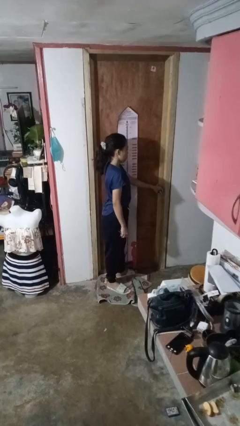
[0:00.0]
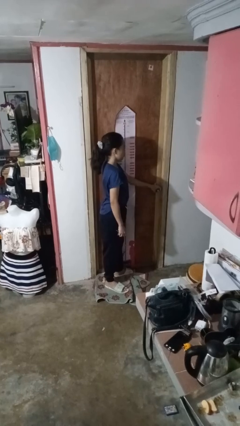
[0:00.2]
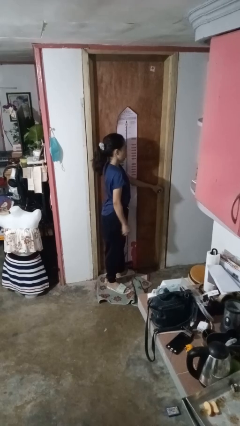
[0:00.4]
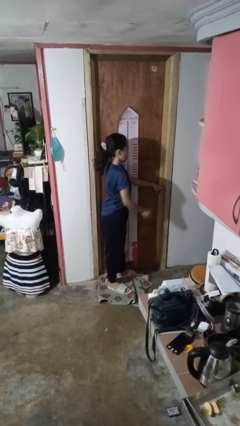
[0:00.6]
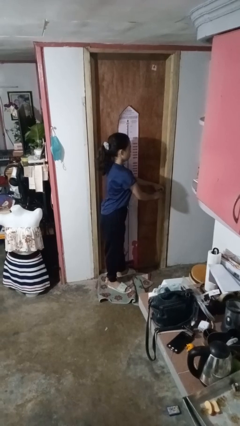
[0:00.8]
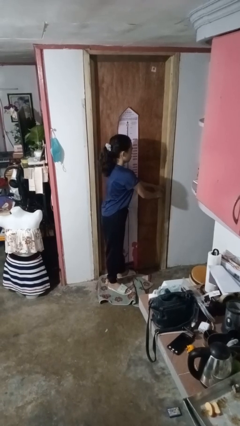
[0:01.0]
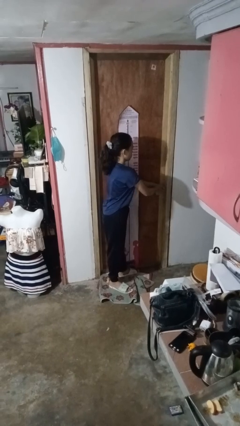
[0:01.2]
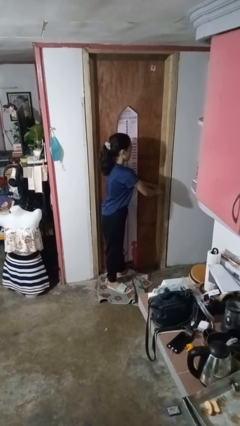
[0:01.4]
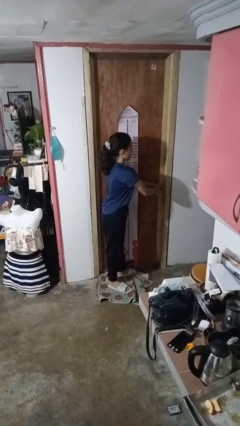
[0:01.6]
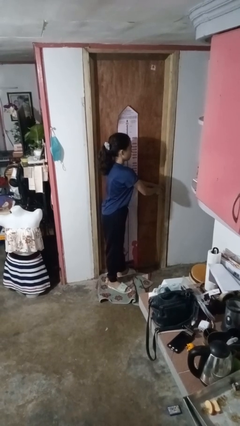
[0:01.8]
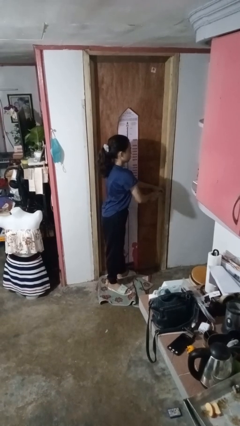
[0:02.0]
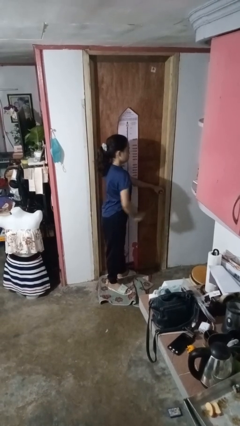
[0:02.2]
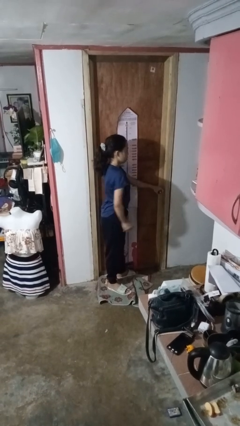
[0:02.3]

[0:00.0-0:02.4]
person locks door with keys

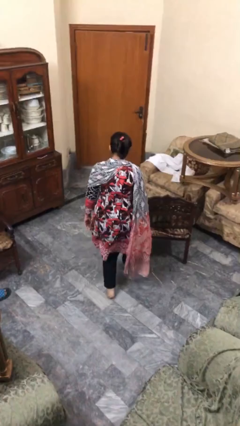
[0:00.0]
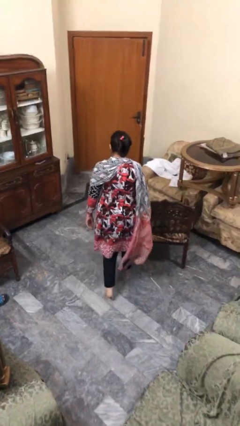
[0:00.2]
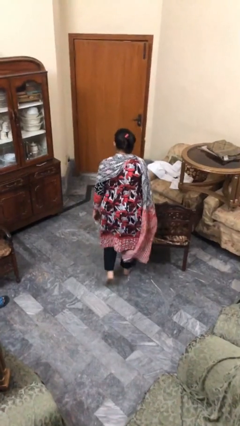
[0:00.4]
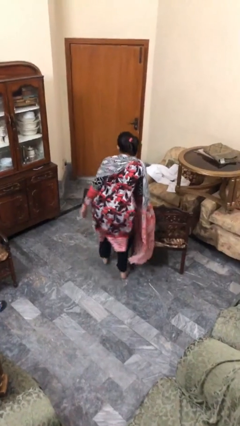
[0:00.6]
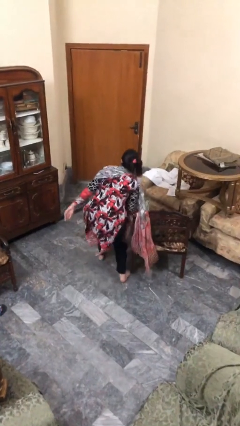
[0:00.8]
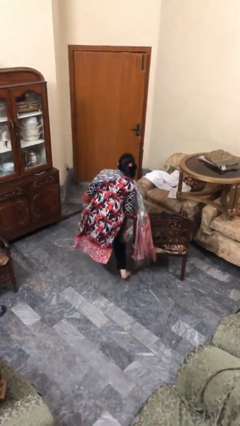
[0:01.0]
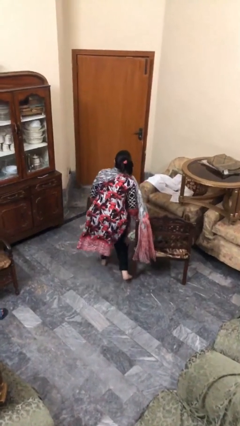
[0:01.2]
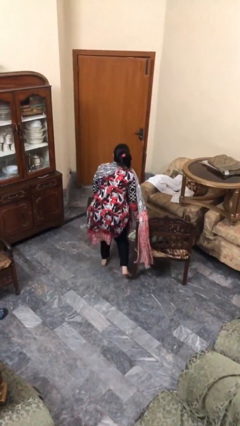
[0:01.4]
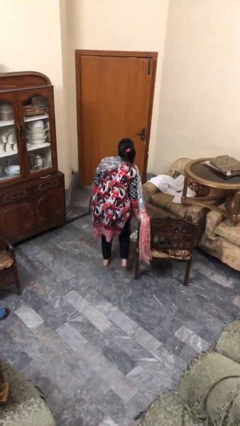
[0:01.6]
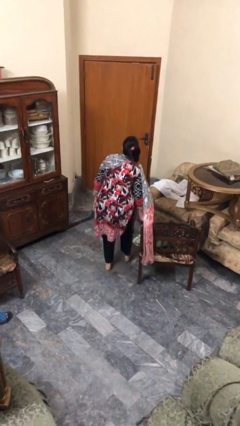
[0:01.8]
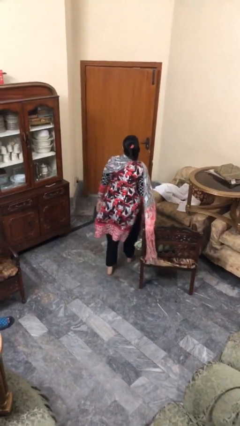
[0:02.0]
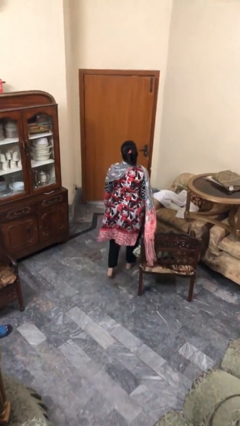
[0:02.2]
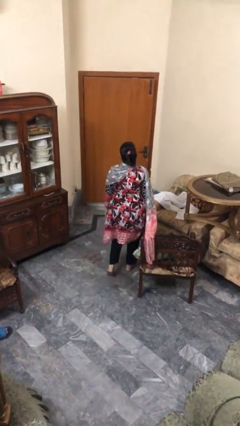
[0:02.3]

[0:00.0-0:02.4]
person stubs toe

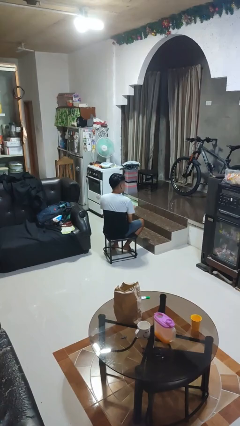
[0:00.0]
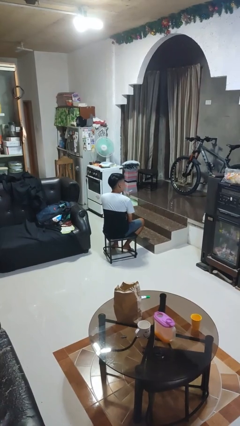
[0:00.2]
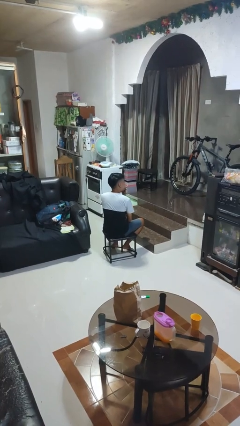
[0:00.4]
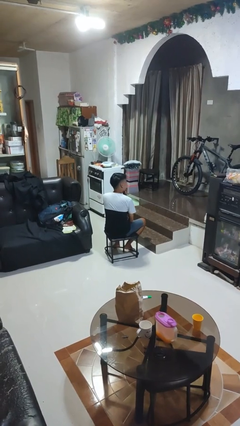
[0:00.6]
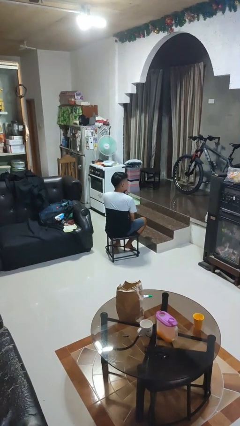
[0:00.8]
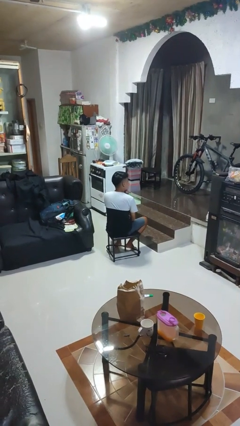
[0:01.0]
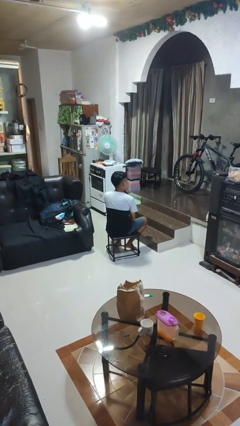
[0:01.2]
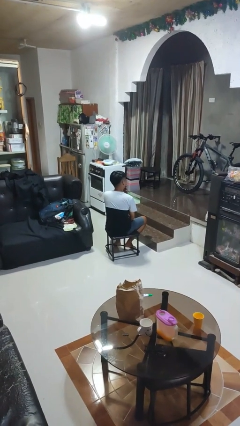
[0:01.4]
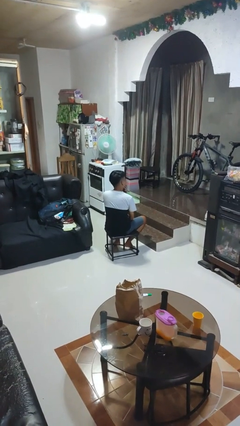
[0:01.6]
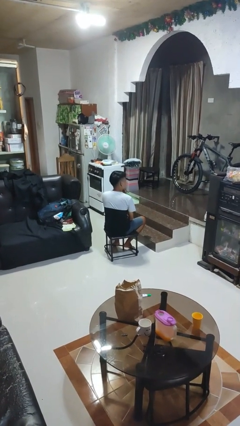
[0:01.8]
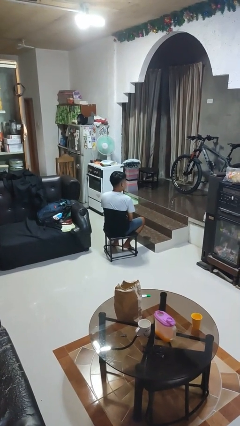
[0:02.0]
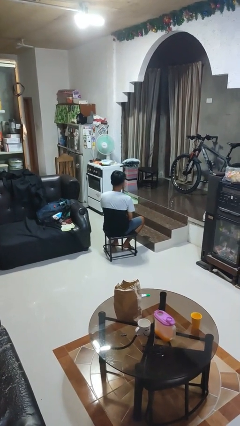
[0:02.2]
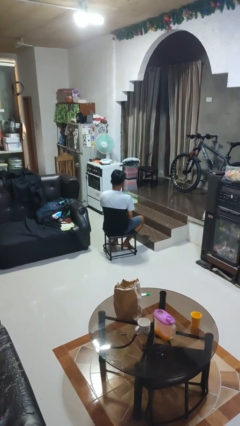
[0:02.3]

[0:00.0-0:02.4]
person strokes chin

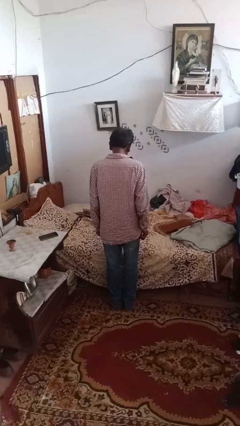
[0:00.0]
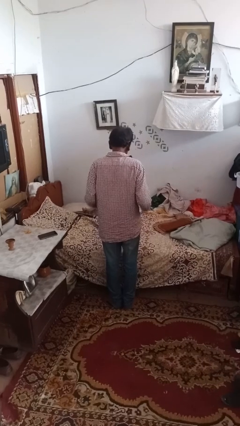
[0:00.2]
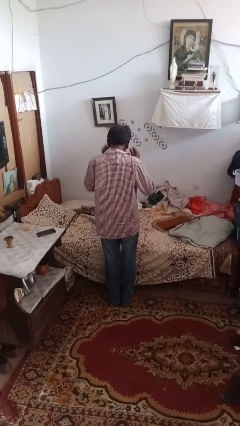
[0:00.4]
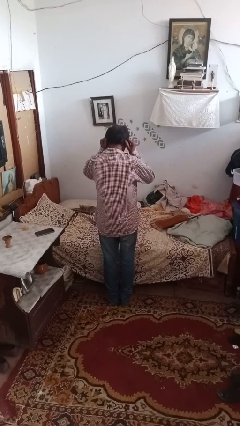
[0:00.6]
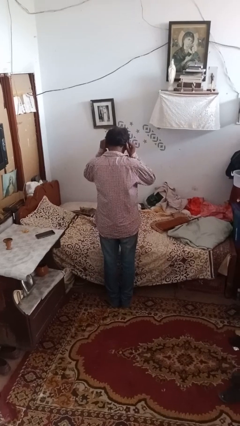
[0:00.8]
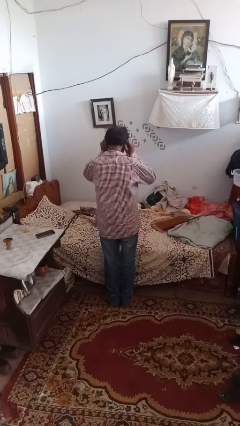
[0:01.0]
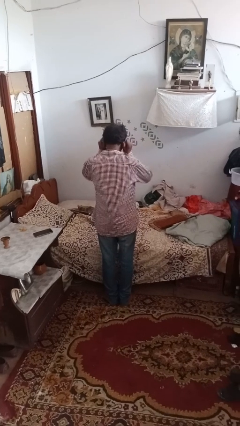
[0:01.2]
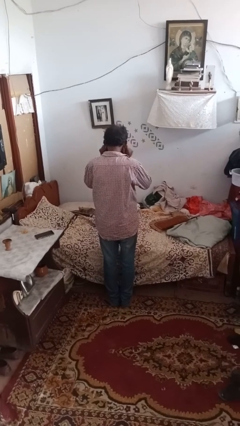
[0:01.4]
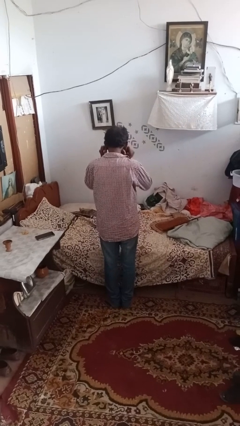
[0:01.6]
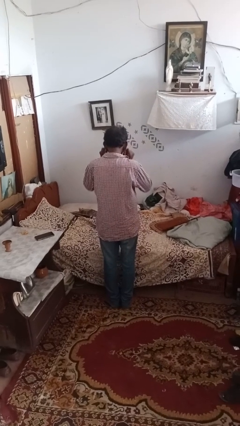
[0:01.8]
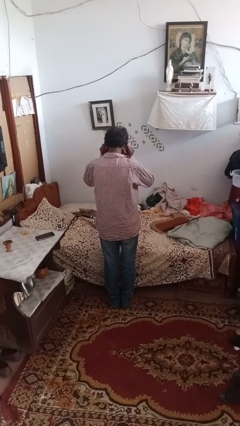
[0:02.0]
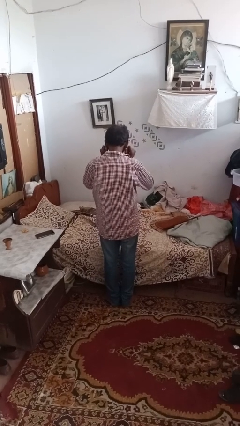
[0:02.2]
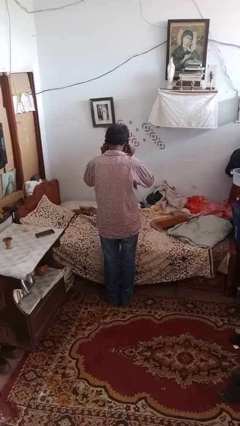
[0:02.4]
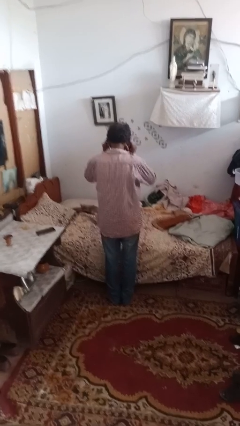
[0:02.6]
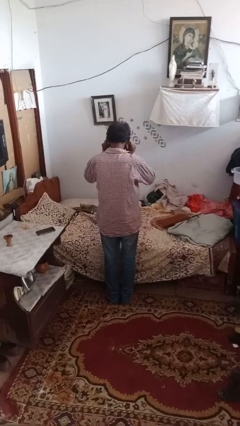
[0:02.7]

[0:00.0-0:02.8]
person touches earlobe

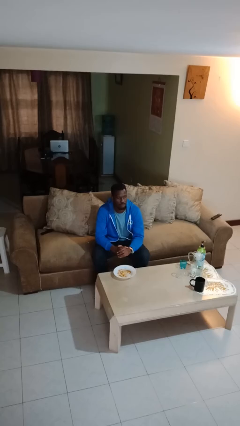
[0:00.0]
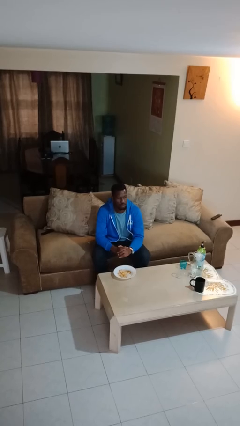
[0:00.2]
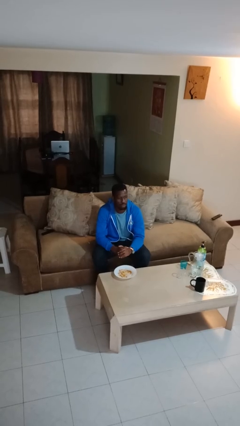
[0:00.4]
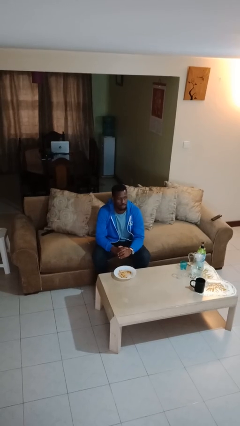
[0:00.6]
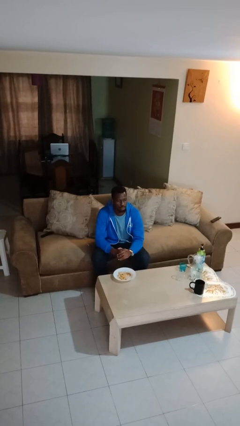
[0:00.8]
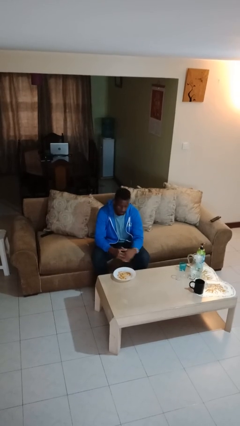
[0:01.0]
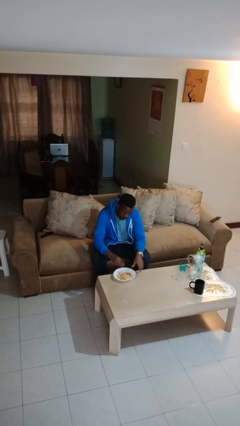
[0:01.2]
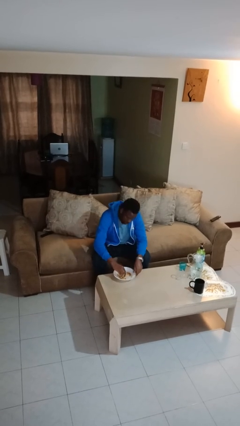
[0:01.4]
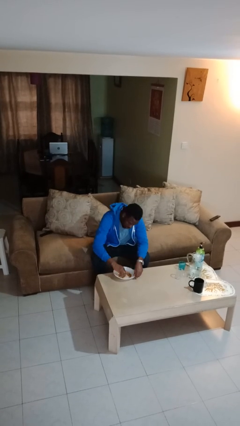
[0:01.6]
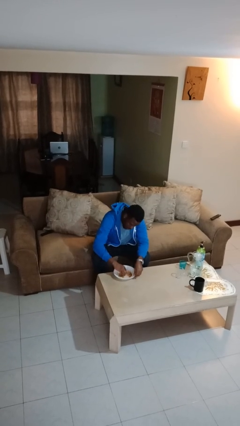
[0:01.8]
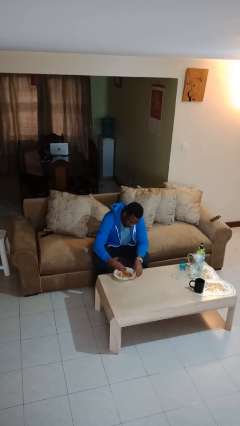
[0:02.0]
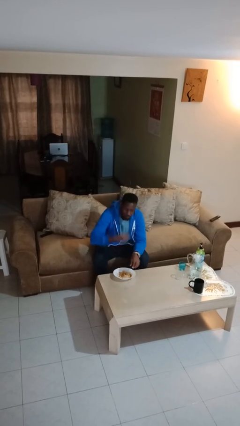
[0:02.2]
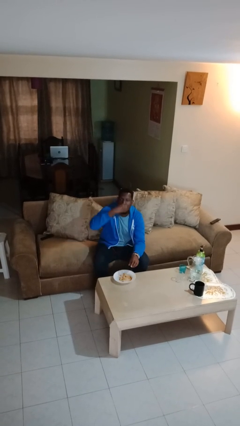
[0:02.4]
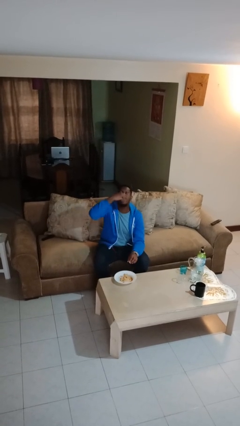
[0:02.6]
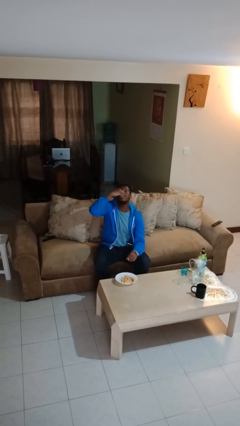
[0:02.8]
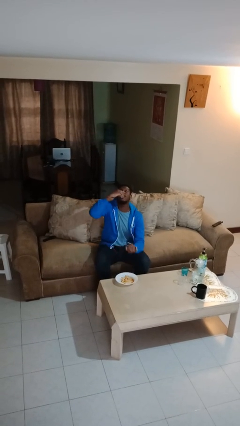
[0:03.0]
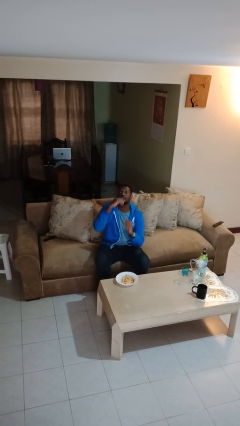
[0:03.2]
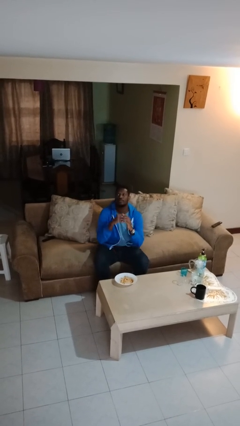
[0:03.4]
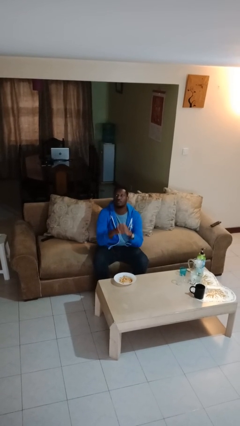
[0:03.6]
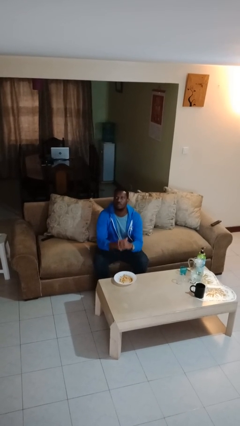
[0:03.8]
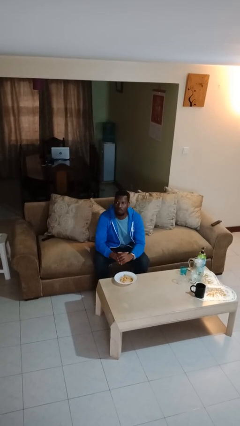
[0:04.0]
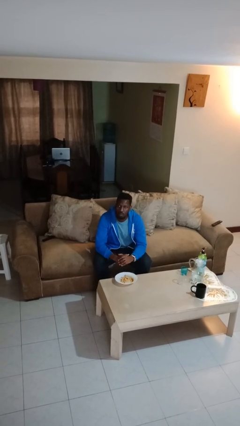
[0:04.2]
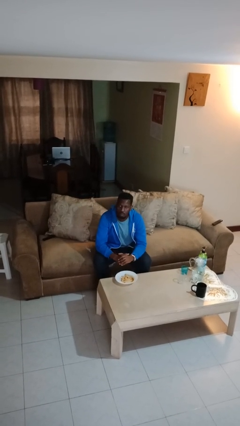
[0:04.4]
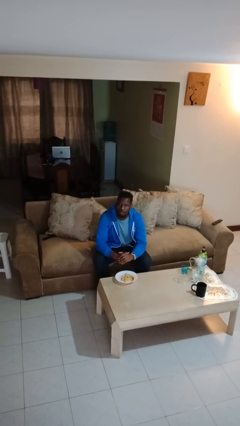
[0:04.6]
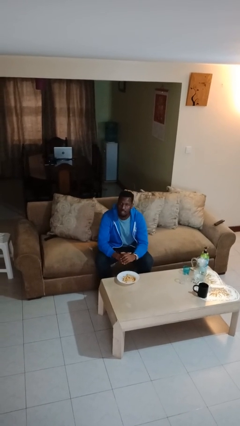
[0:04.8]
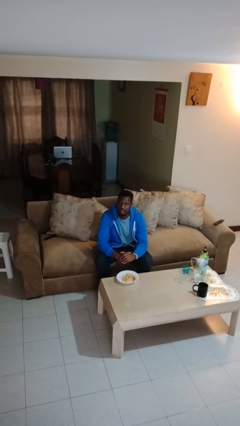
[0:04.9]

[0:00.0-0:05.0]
person eats with hands

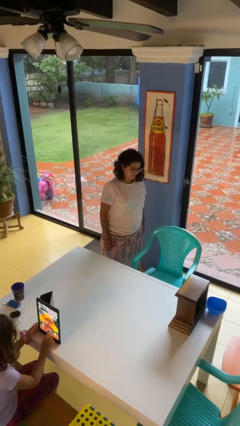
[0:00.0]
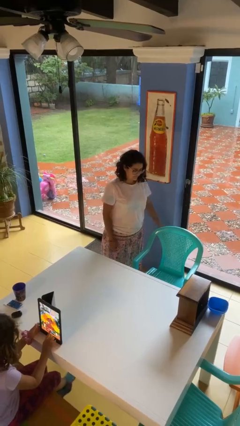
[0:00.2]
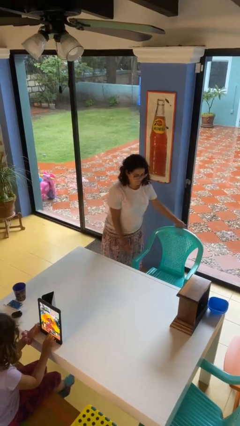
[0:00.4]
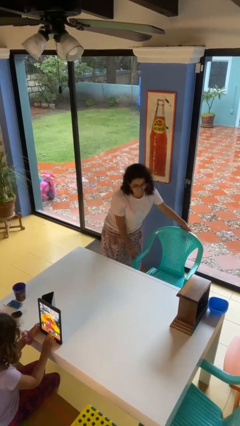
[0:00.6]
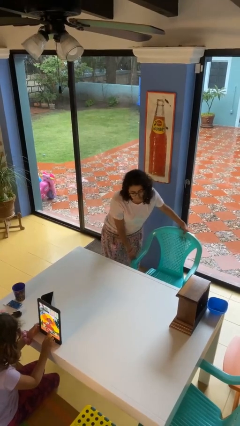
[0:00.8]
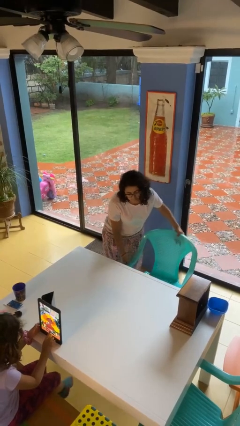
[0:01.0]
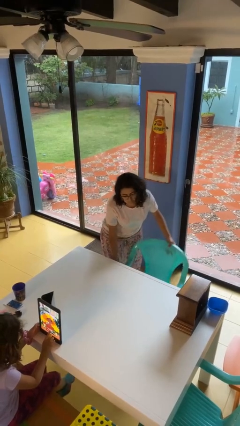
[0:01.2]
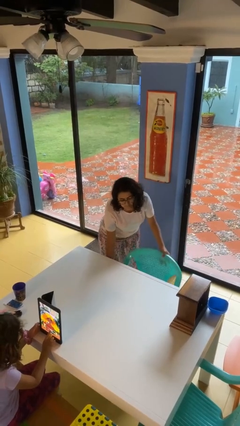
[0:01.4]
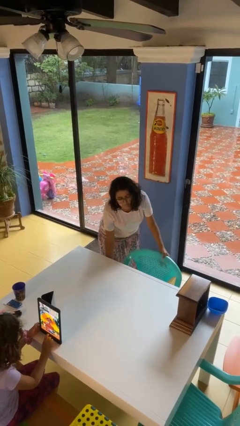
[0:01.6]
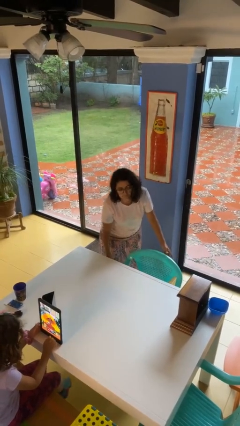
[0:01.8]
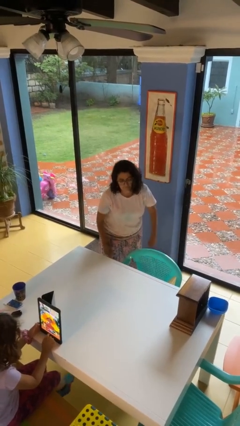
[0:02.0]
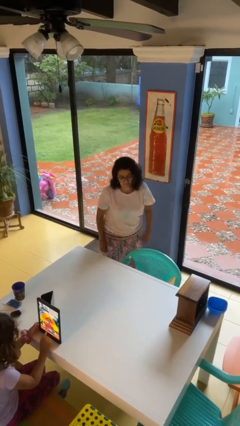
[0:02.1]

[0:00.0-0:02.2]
person pushes in chair

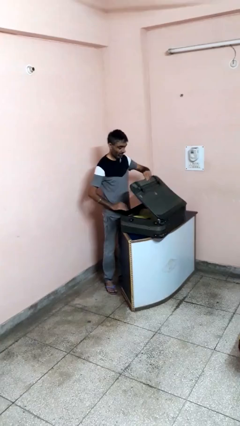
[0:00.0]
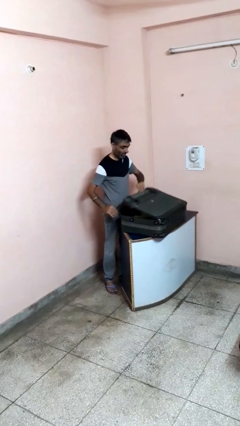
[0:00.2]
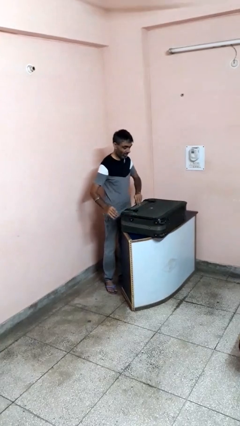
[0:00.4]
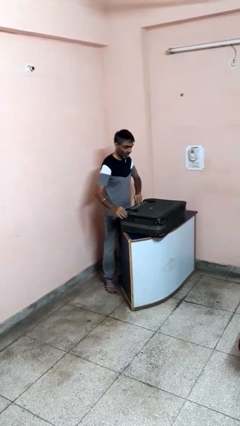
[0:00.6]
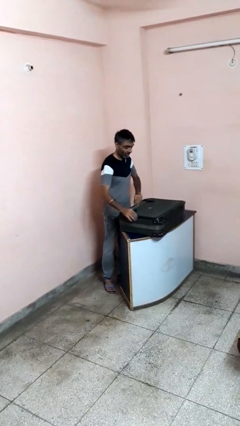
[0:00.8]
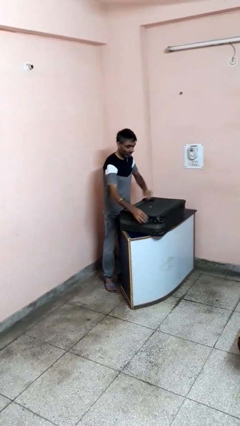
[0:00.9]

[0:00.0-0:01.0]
person closes suitcase
